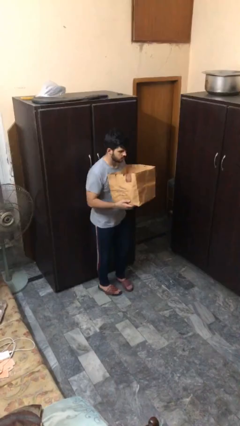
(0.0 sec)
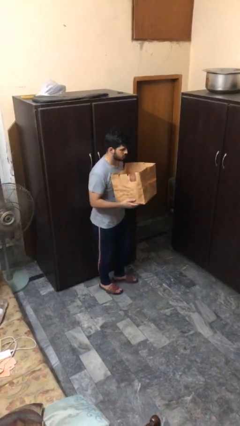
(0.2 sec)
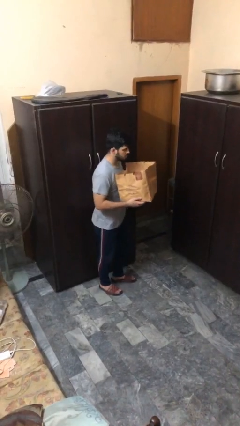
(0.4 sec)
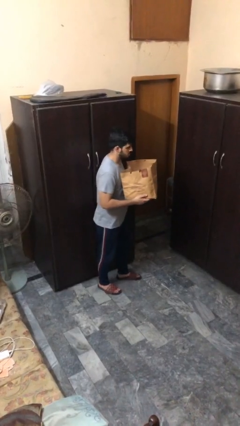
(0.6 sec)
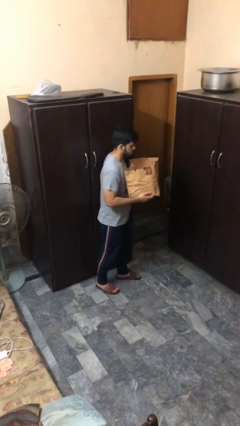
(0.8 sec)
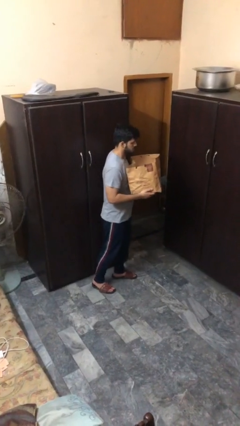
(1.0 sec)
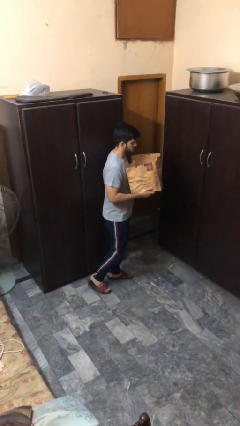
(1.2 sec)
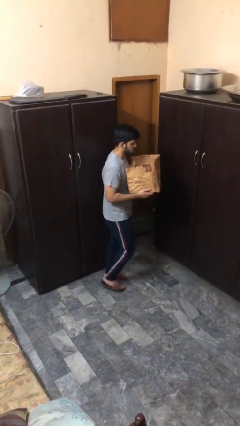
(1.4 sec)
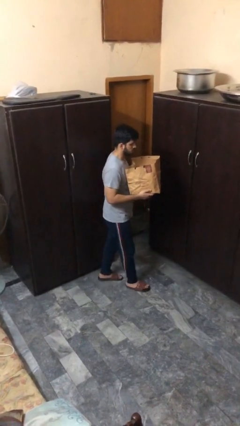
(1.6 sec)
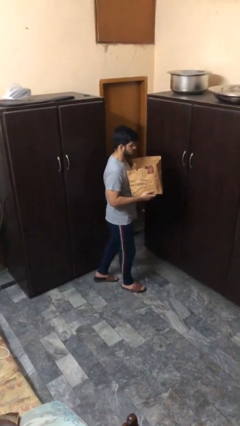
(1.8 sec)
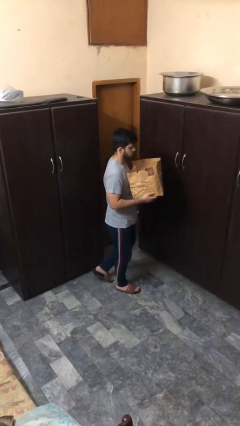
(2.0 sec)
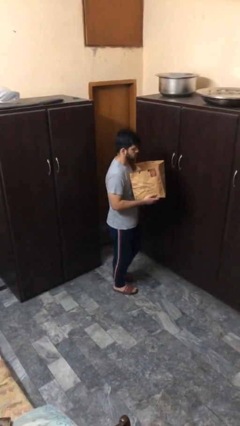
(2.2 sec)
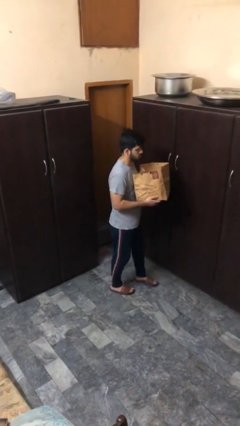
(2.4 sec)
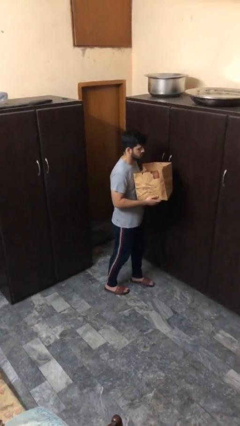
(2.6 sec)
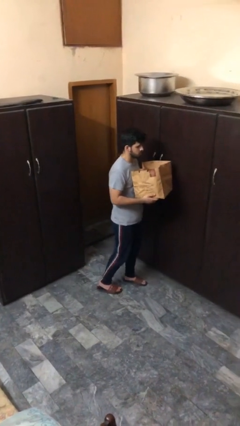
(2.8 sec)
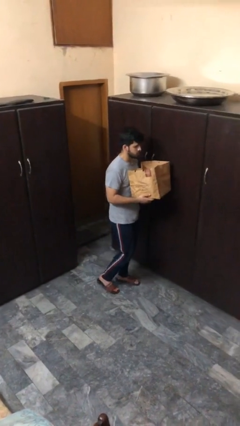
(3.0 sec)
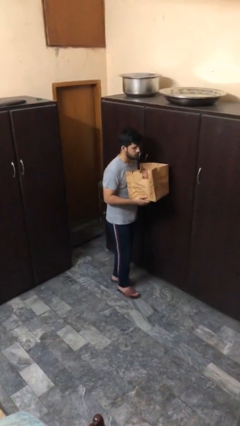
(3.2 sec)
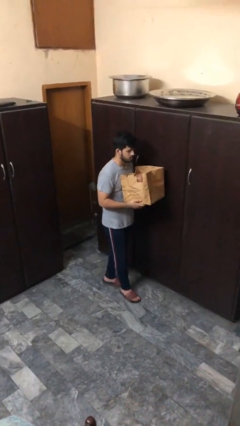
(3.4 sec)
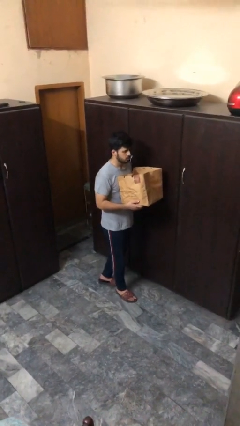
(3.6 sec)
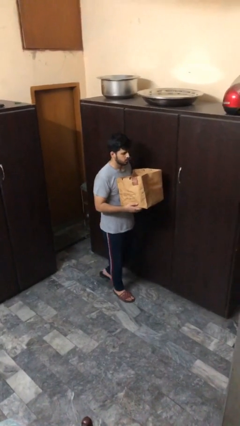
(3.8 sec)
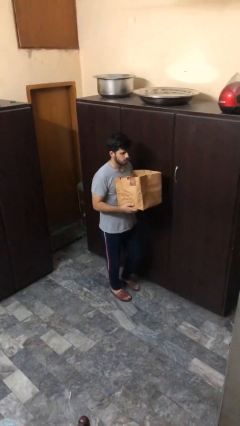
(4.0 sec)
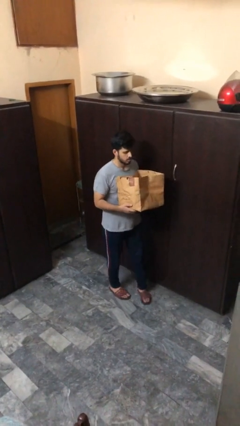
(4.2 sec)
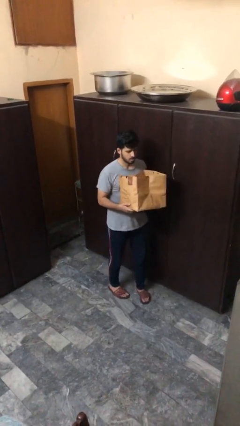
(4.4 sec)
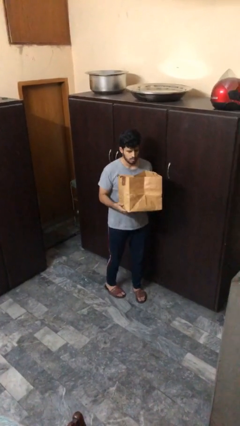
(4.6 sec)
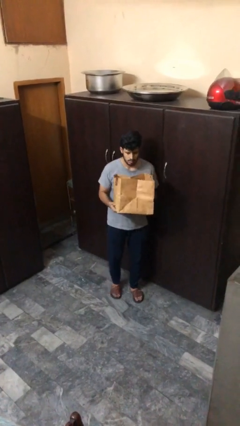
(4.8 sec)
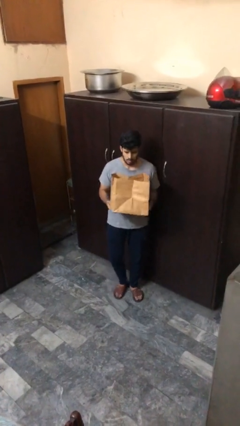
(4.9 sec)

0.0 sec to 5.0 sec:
person carries groceries

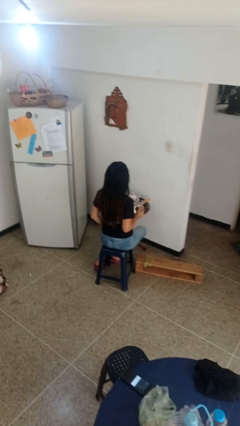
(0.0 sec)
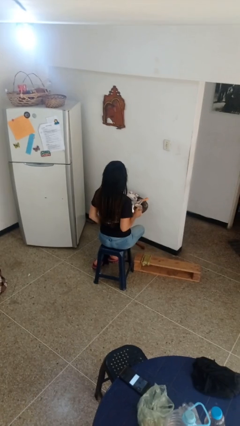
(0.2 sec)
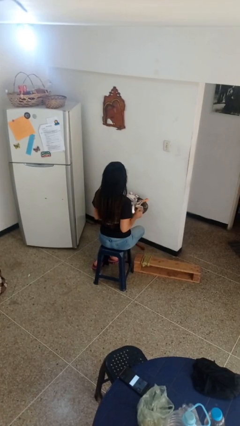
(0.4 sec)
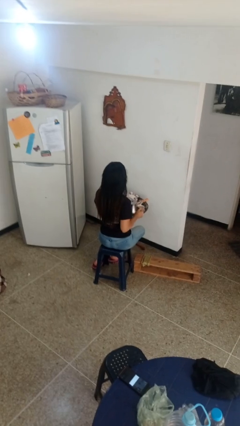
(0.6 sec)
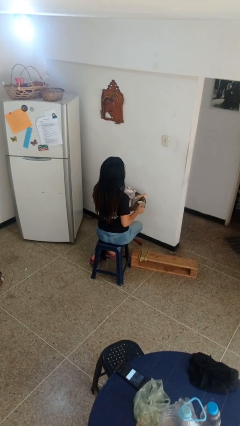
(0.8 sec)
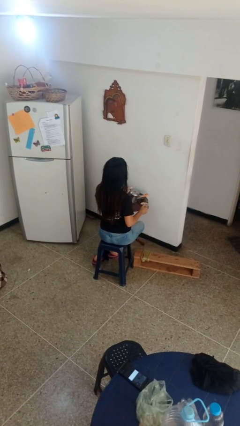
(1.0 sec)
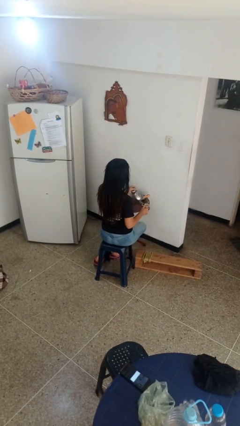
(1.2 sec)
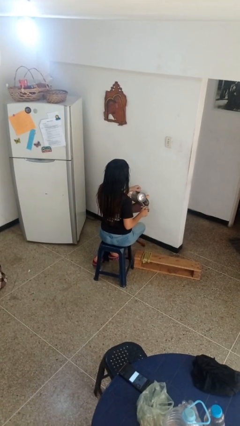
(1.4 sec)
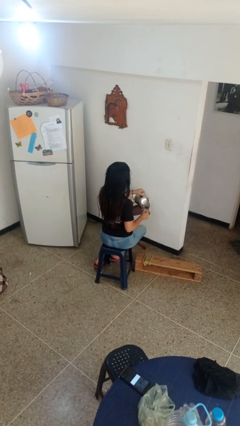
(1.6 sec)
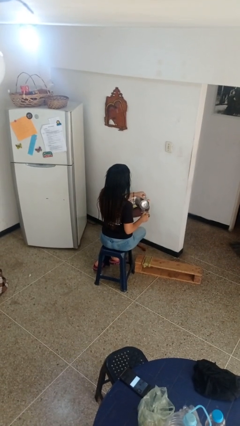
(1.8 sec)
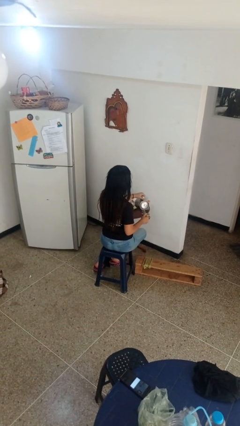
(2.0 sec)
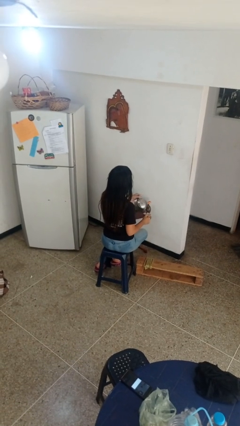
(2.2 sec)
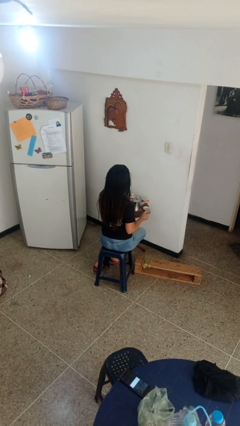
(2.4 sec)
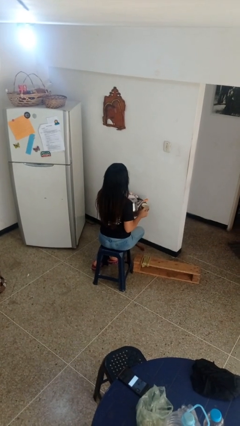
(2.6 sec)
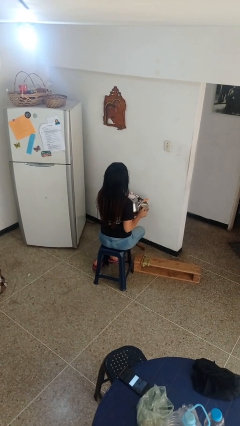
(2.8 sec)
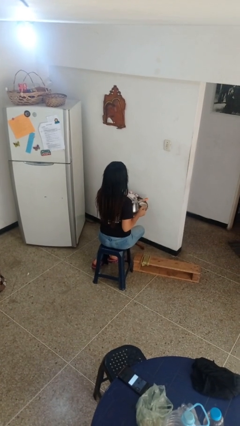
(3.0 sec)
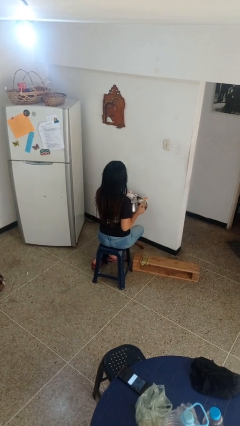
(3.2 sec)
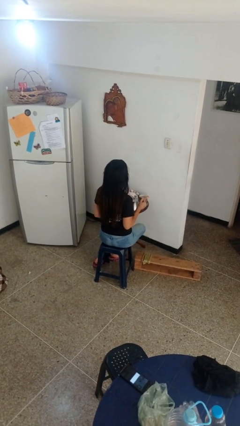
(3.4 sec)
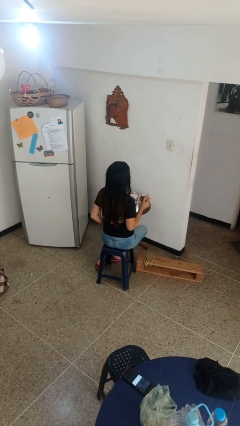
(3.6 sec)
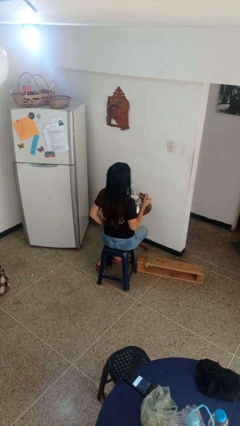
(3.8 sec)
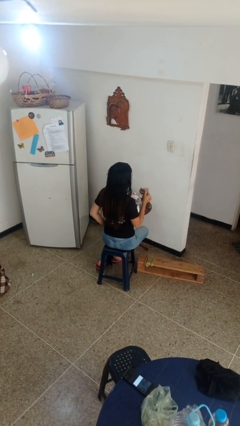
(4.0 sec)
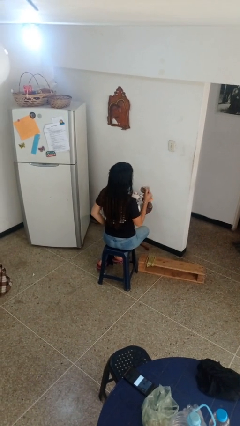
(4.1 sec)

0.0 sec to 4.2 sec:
person pours coffee into mug

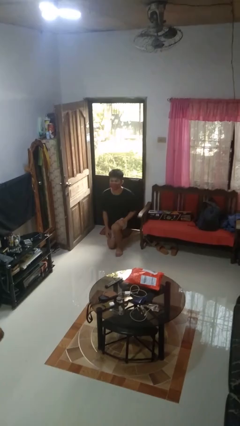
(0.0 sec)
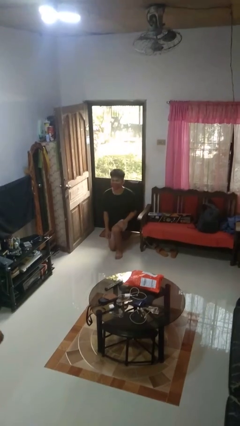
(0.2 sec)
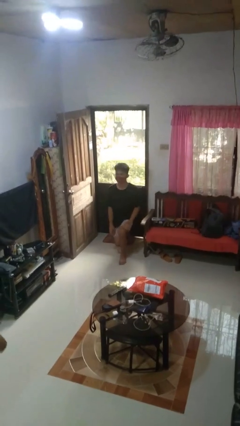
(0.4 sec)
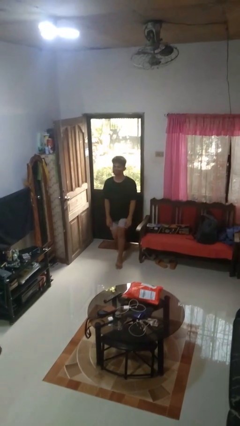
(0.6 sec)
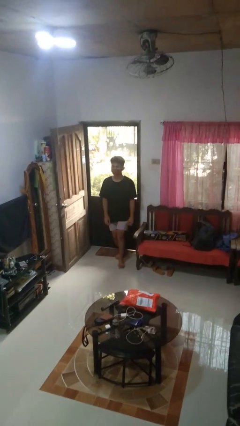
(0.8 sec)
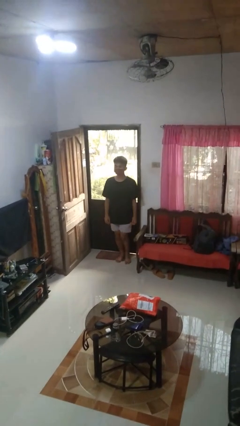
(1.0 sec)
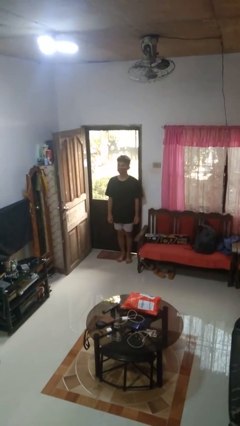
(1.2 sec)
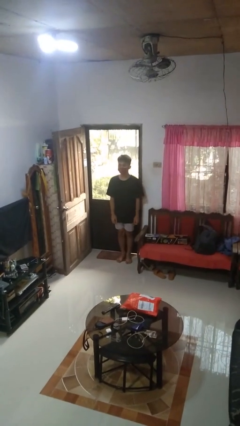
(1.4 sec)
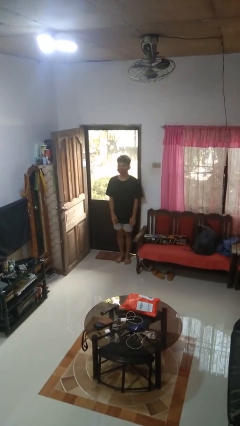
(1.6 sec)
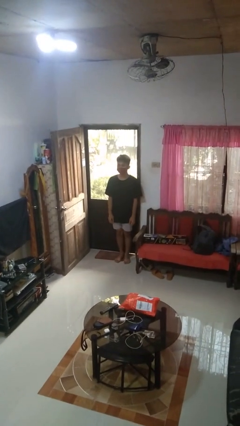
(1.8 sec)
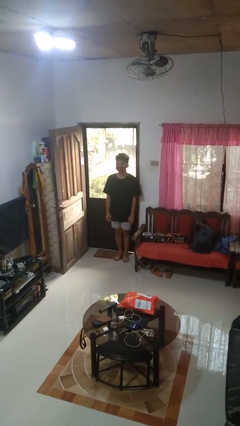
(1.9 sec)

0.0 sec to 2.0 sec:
person stands up from floor

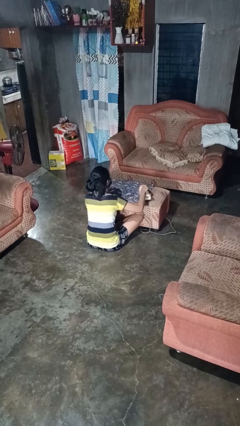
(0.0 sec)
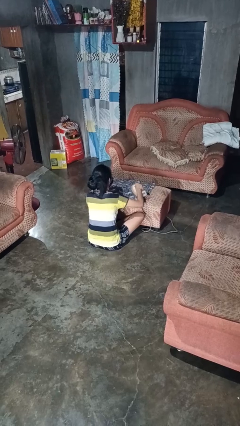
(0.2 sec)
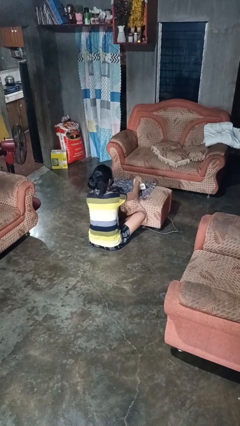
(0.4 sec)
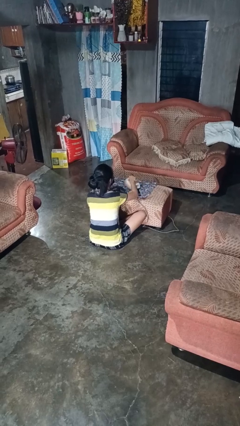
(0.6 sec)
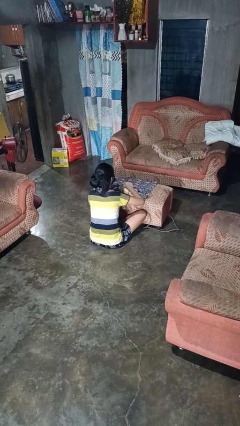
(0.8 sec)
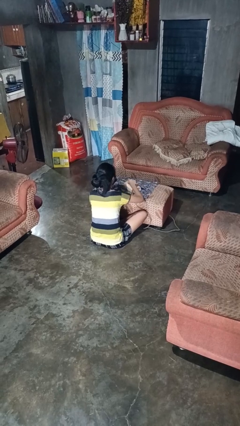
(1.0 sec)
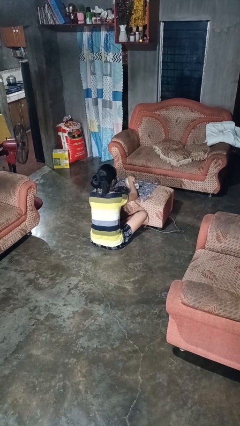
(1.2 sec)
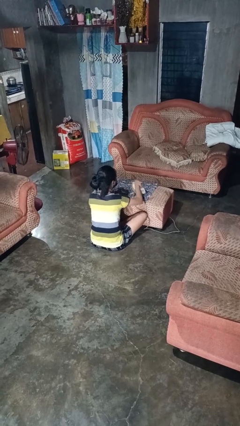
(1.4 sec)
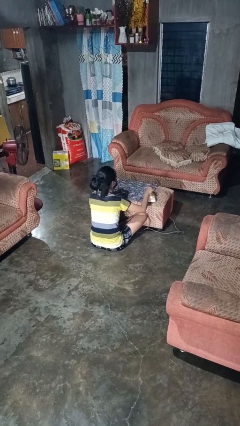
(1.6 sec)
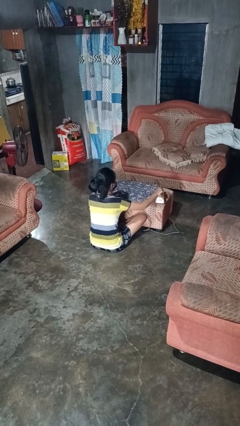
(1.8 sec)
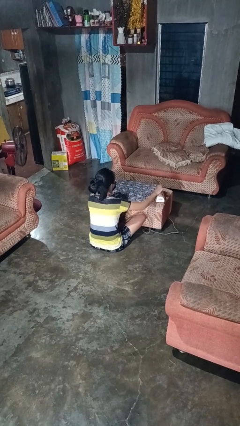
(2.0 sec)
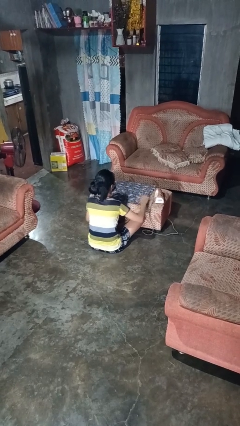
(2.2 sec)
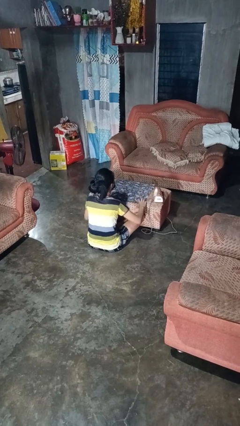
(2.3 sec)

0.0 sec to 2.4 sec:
person irons clothes

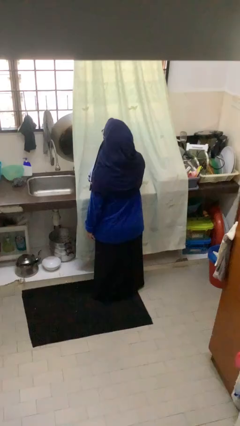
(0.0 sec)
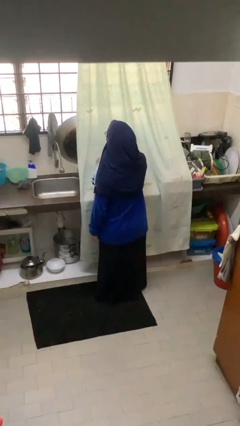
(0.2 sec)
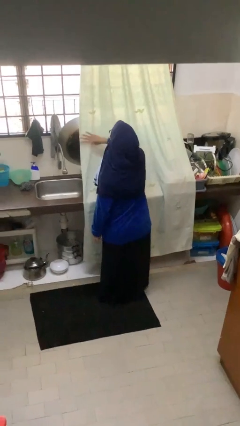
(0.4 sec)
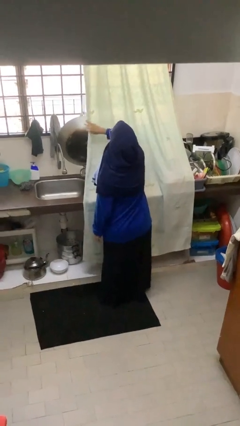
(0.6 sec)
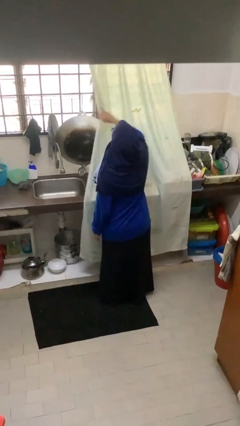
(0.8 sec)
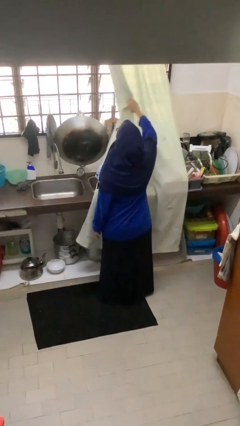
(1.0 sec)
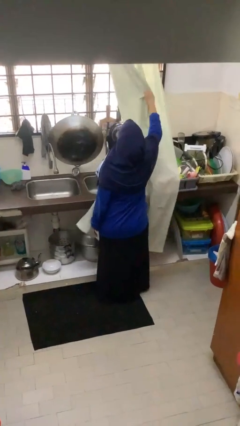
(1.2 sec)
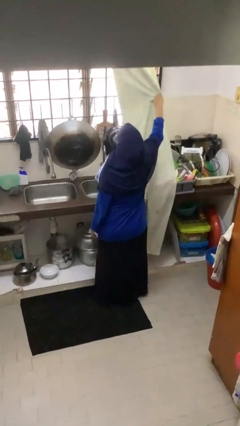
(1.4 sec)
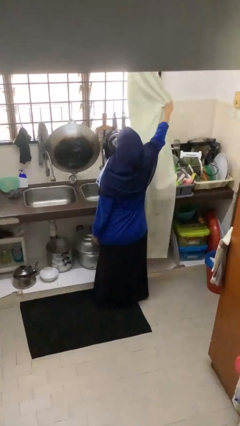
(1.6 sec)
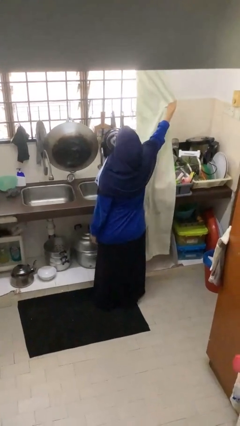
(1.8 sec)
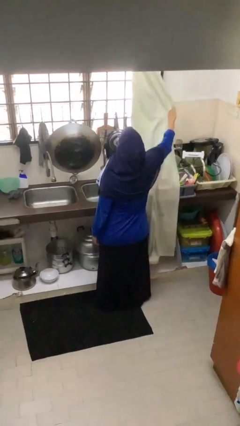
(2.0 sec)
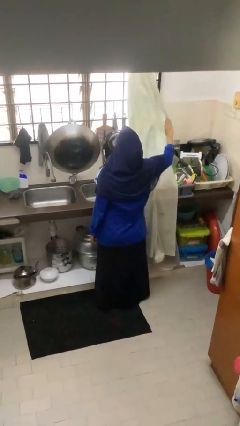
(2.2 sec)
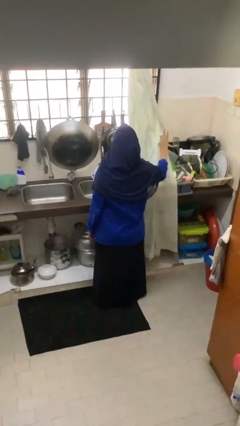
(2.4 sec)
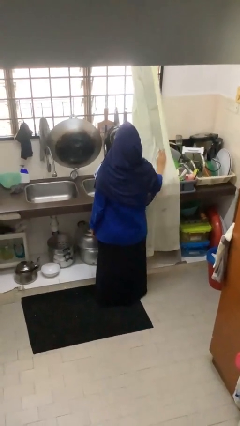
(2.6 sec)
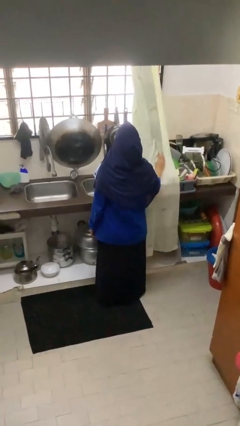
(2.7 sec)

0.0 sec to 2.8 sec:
person opens curtains

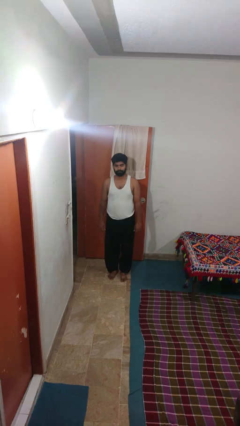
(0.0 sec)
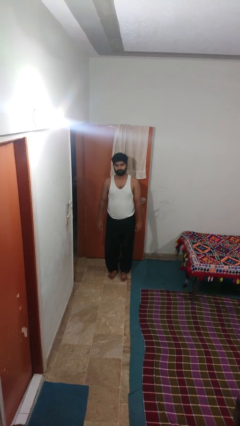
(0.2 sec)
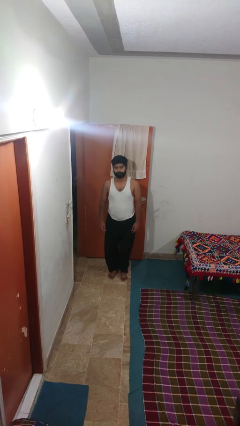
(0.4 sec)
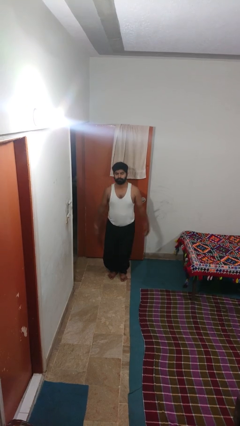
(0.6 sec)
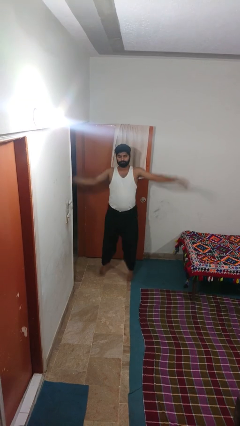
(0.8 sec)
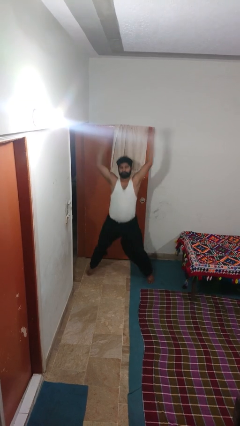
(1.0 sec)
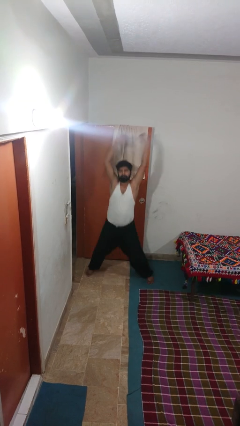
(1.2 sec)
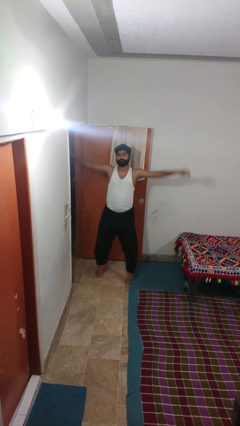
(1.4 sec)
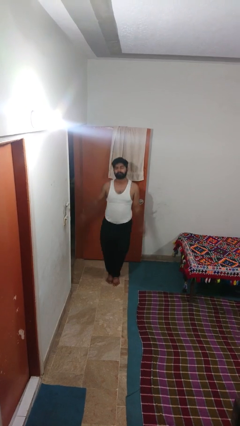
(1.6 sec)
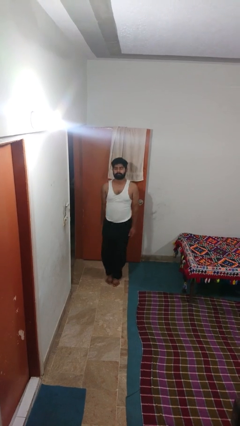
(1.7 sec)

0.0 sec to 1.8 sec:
person exercises with jumping jacks
